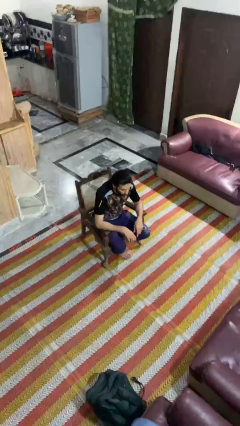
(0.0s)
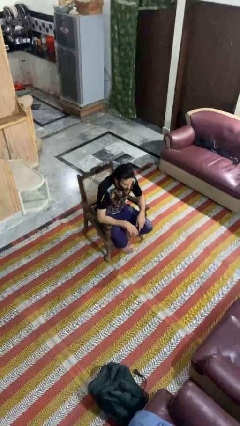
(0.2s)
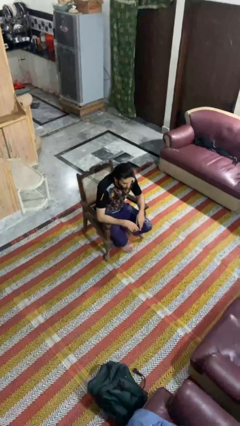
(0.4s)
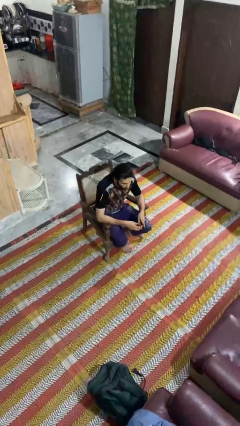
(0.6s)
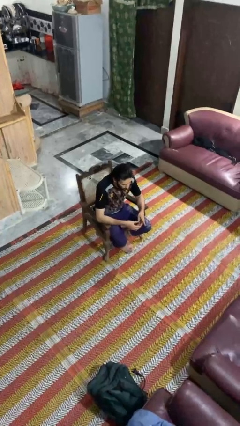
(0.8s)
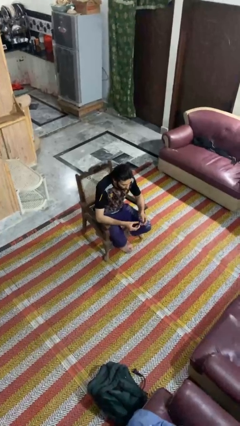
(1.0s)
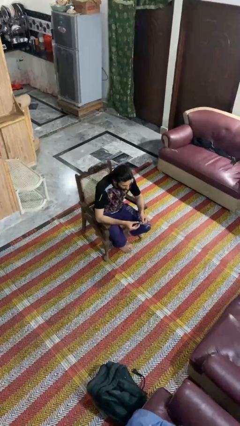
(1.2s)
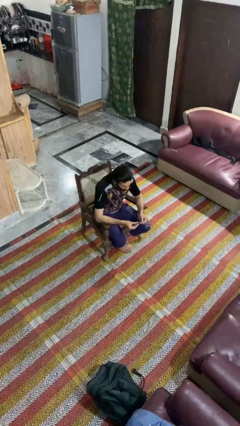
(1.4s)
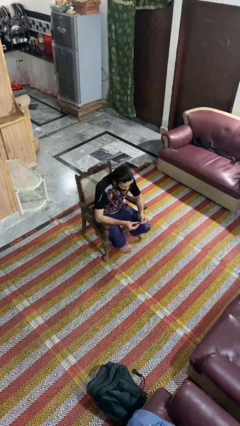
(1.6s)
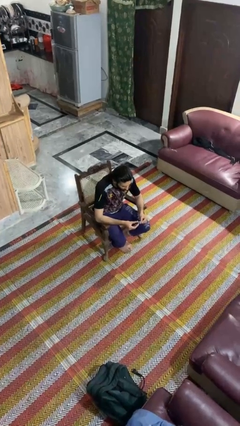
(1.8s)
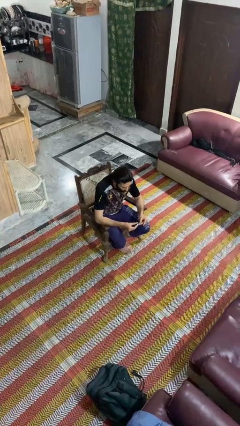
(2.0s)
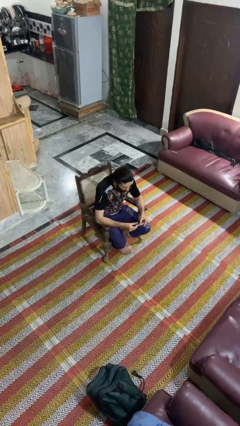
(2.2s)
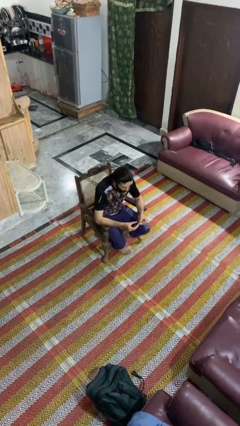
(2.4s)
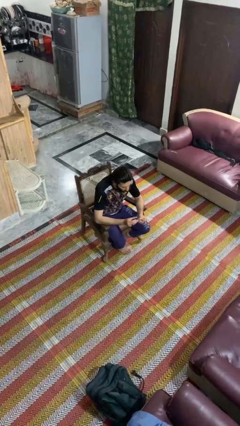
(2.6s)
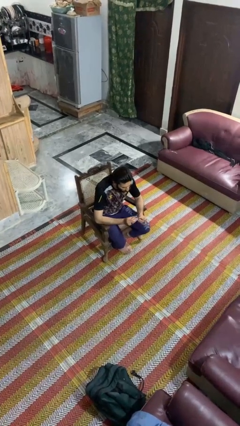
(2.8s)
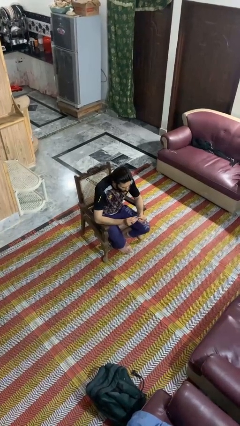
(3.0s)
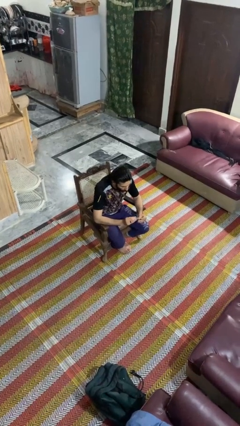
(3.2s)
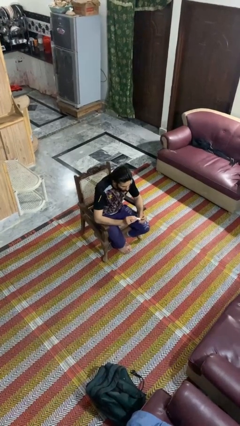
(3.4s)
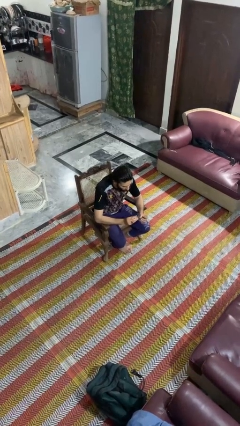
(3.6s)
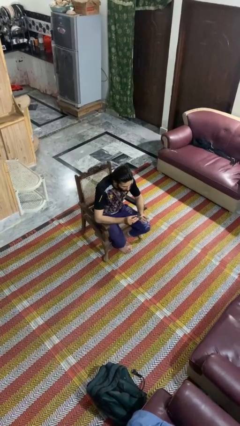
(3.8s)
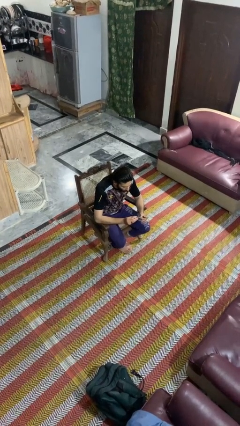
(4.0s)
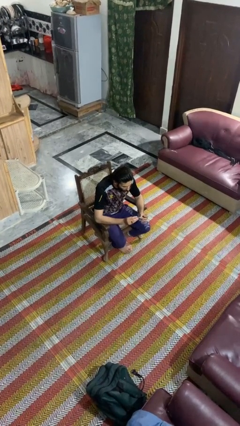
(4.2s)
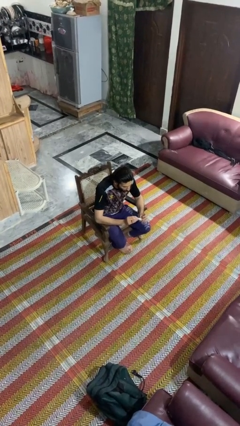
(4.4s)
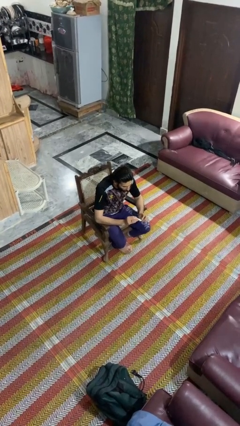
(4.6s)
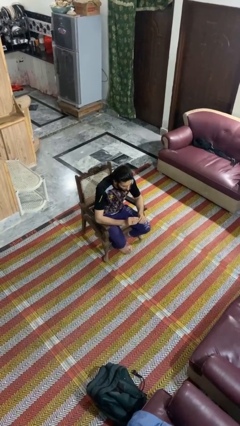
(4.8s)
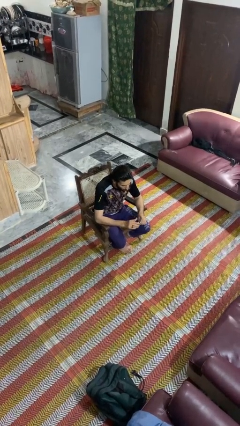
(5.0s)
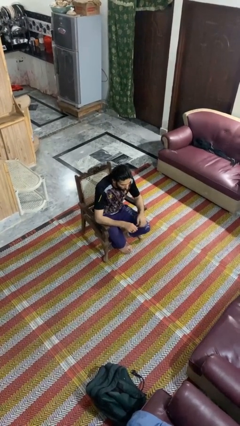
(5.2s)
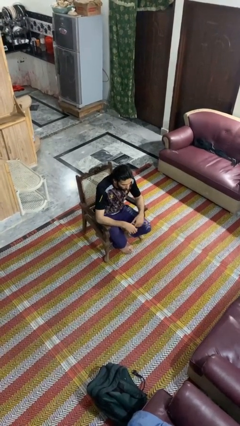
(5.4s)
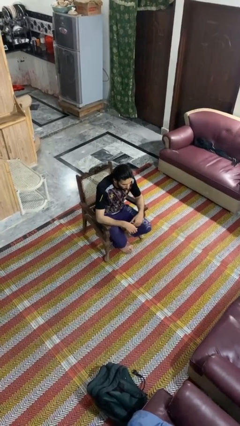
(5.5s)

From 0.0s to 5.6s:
person clips fingernails

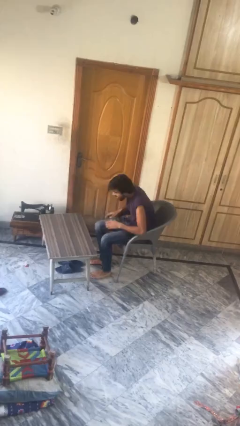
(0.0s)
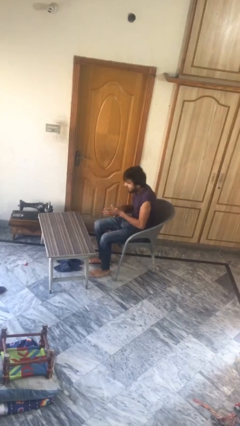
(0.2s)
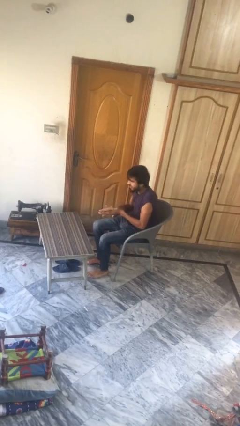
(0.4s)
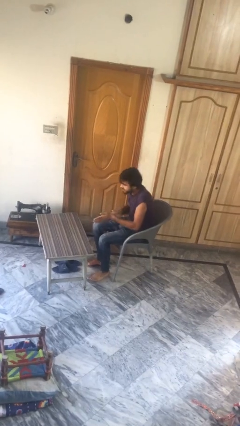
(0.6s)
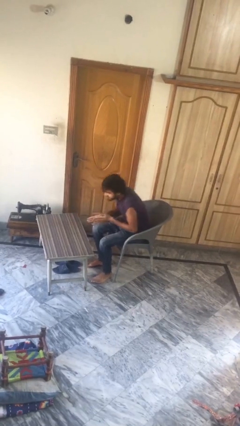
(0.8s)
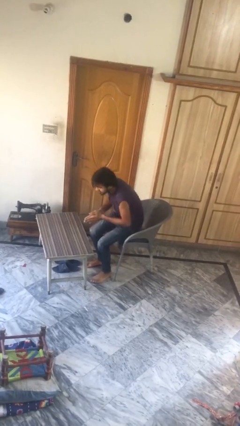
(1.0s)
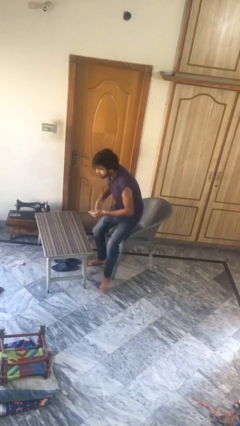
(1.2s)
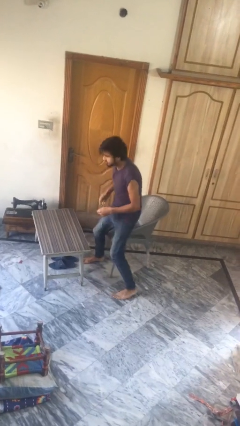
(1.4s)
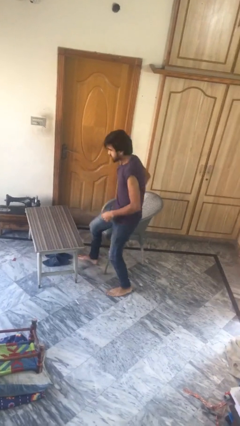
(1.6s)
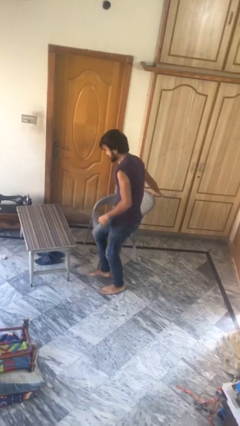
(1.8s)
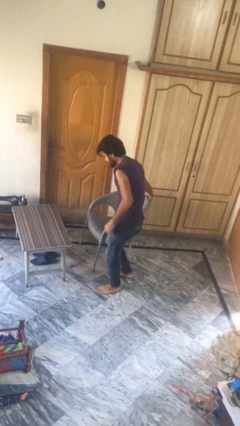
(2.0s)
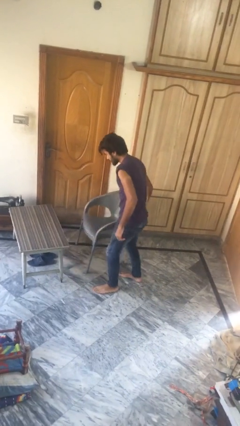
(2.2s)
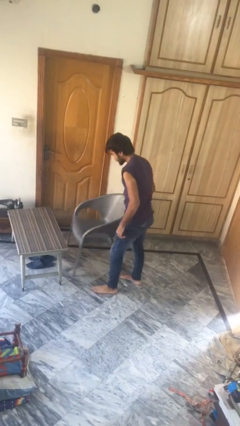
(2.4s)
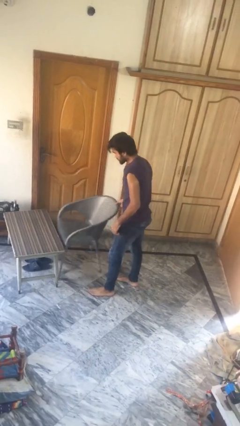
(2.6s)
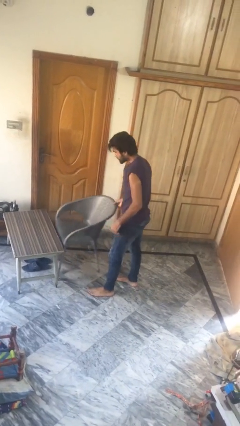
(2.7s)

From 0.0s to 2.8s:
person stands up

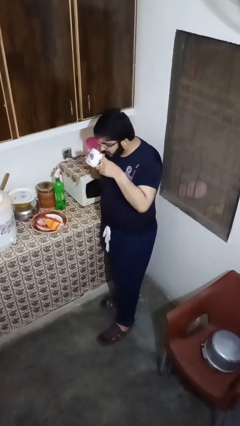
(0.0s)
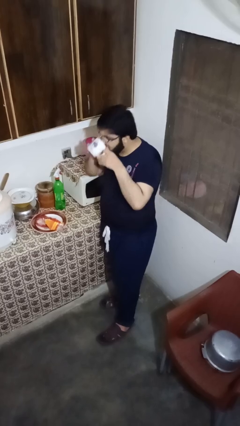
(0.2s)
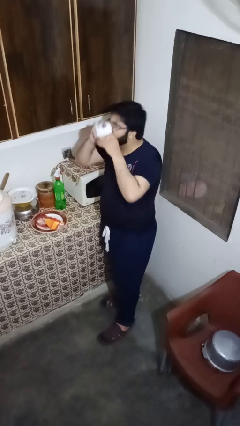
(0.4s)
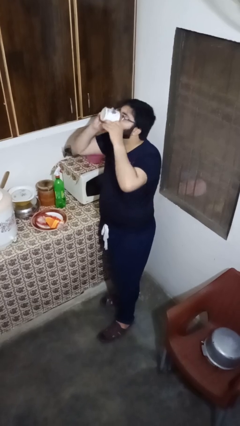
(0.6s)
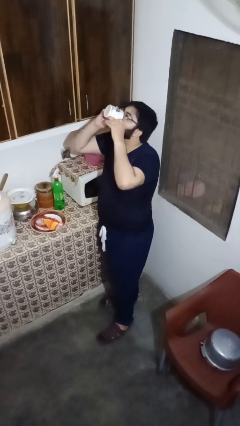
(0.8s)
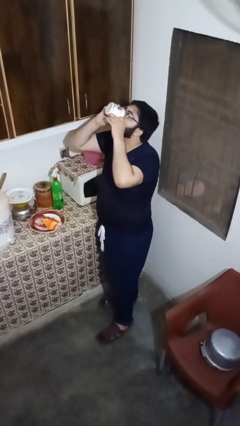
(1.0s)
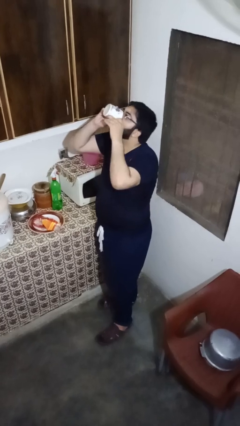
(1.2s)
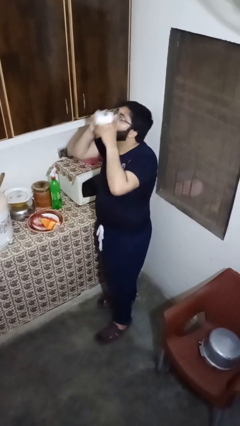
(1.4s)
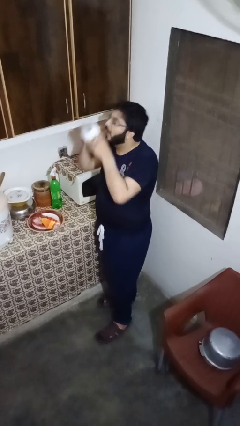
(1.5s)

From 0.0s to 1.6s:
person drinks from mug

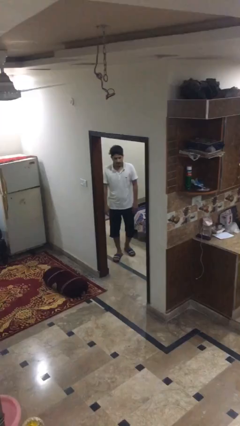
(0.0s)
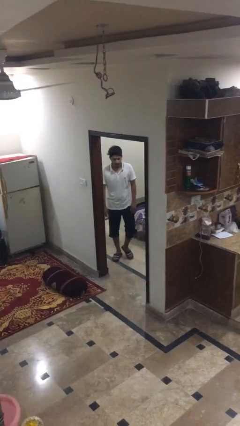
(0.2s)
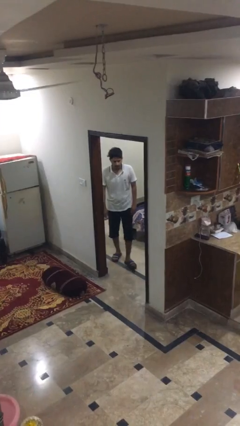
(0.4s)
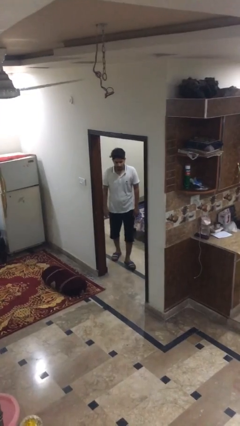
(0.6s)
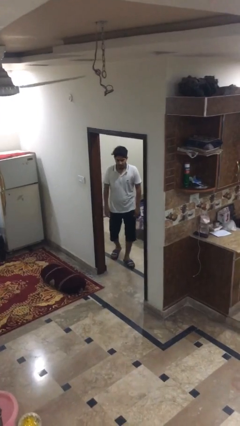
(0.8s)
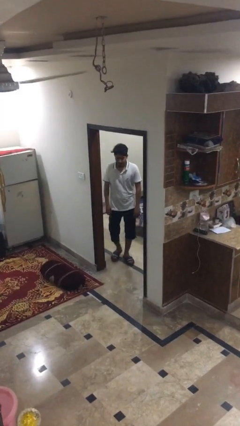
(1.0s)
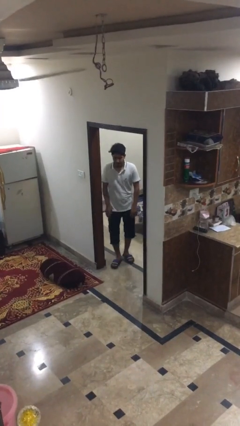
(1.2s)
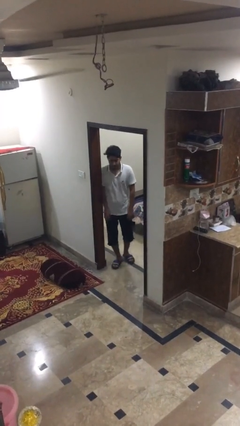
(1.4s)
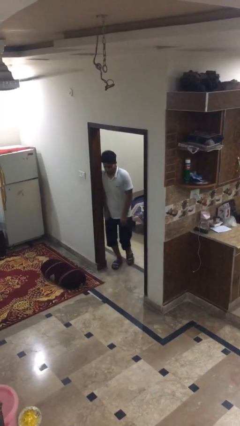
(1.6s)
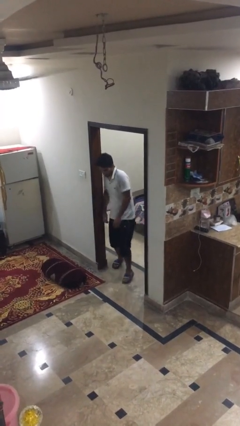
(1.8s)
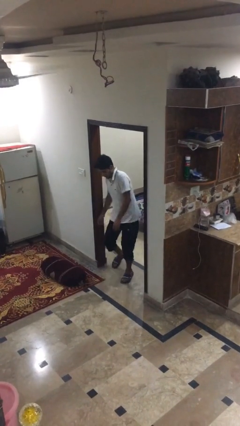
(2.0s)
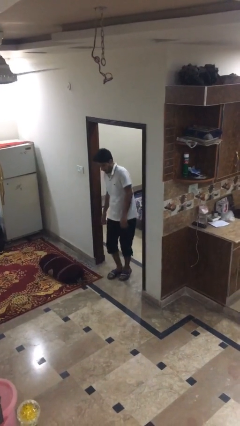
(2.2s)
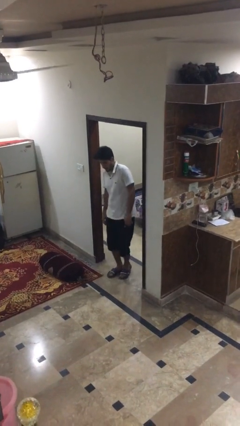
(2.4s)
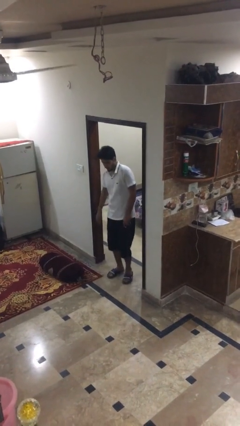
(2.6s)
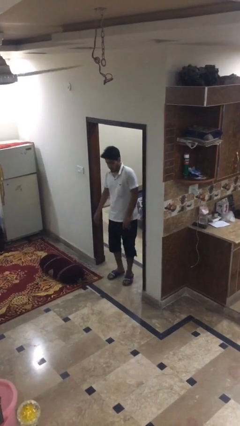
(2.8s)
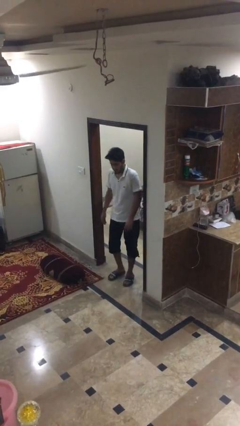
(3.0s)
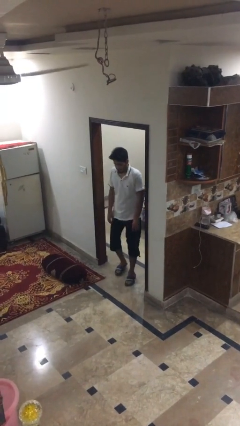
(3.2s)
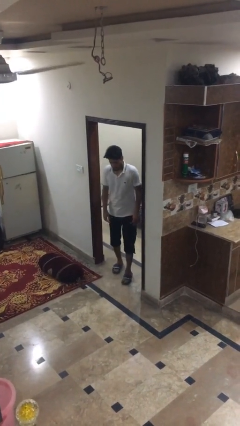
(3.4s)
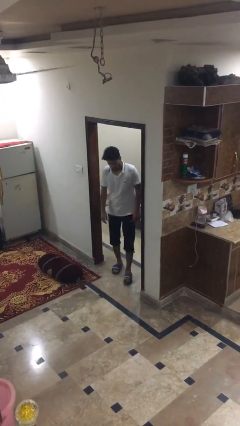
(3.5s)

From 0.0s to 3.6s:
person bumps into wall

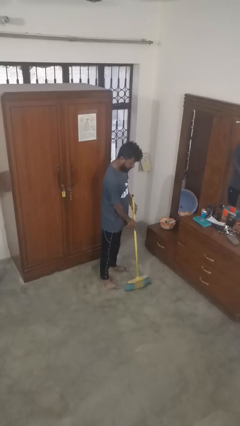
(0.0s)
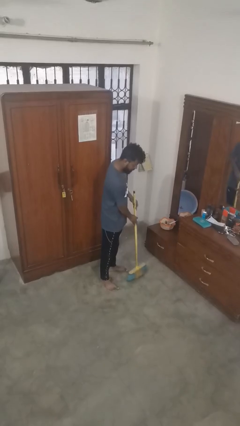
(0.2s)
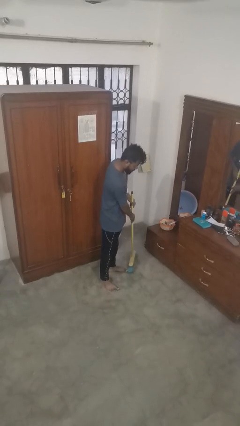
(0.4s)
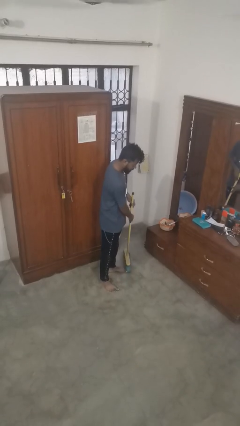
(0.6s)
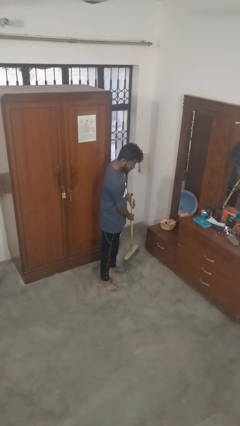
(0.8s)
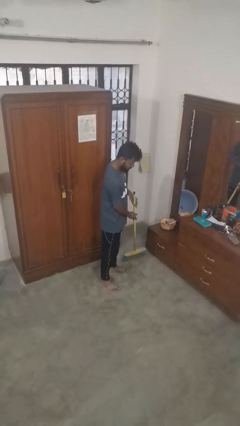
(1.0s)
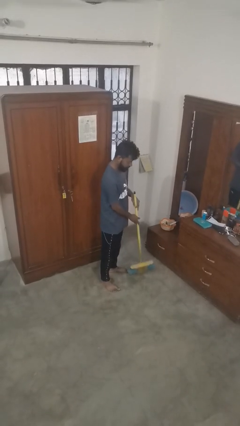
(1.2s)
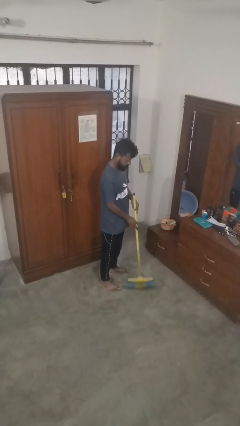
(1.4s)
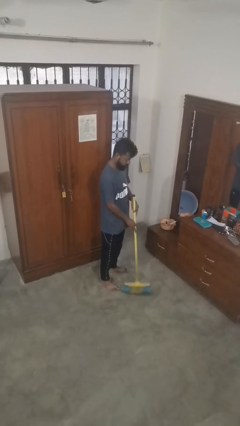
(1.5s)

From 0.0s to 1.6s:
person sweeps floor

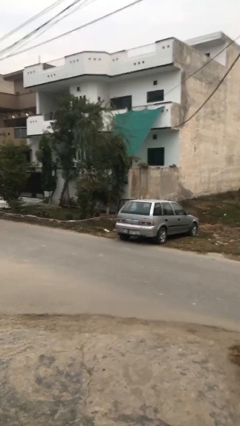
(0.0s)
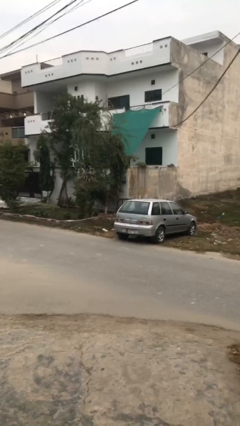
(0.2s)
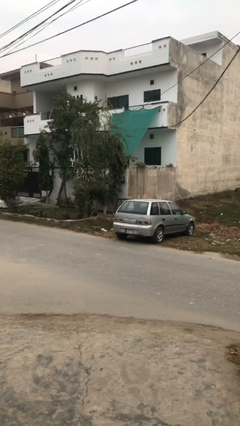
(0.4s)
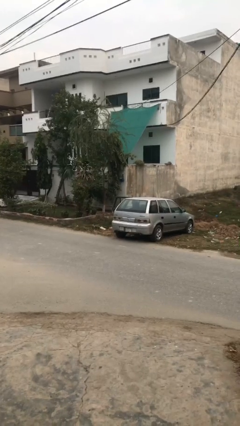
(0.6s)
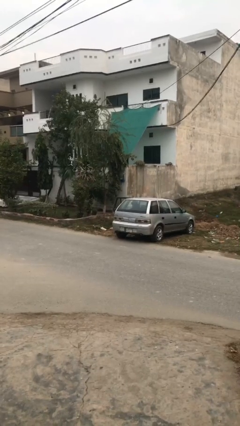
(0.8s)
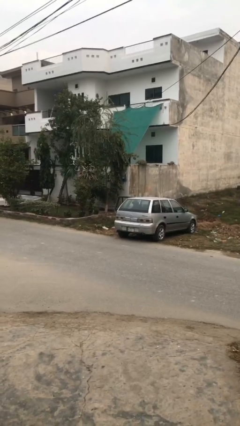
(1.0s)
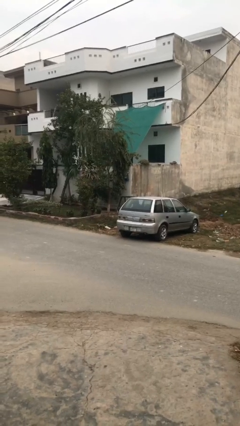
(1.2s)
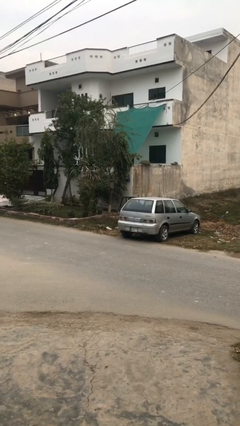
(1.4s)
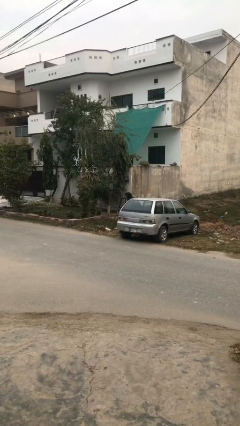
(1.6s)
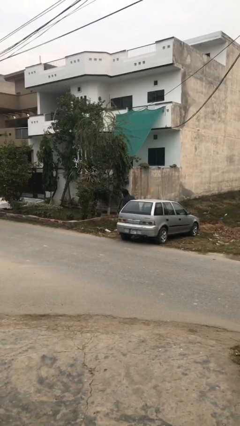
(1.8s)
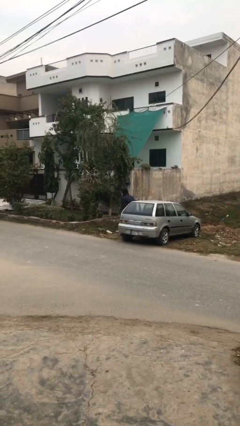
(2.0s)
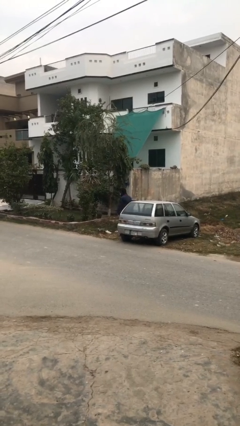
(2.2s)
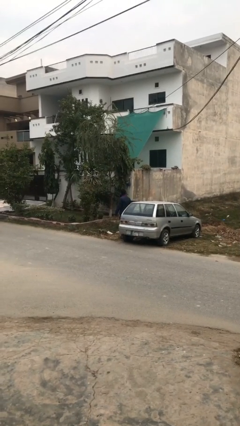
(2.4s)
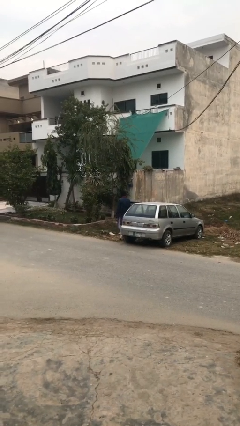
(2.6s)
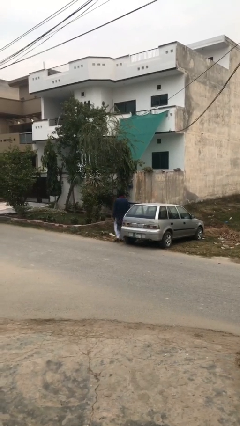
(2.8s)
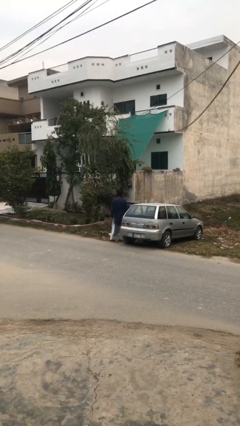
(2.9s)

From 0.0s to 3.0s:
person exits car
